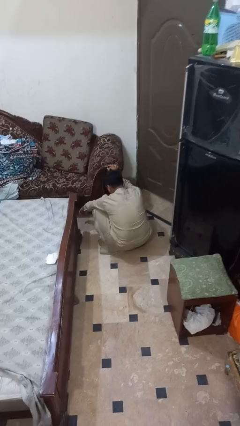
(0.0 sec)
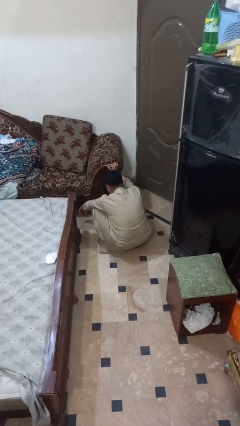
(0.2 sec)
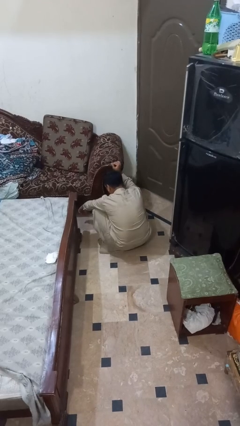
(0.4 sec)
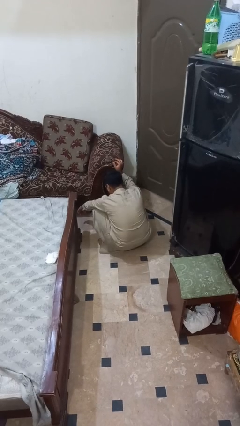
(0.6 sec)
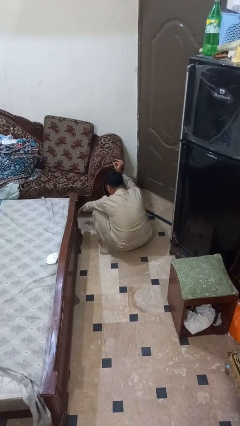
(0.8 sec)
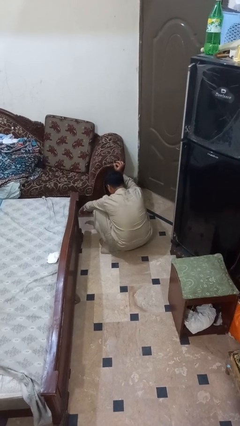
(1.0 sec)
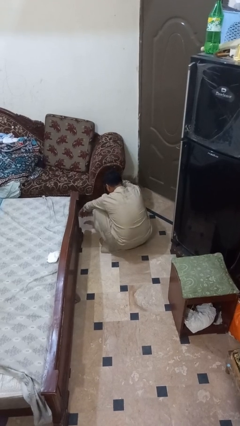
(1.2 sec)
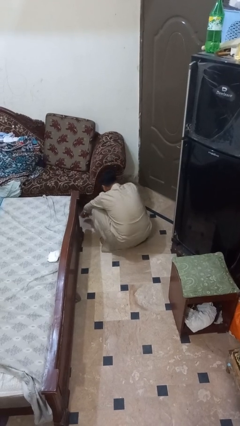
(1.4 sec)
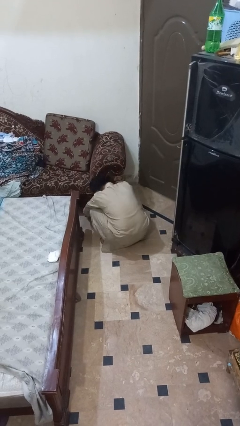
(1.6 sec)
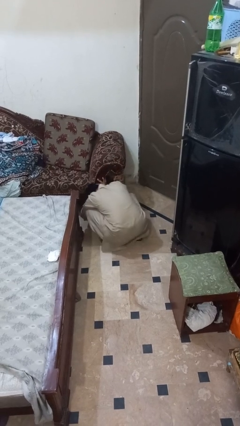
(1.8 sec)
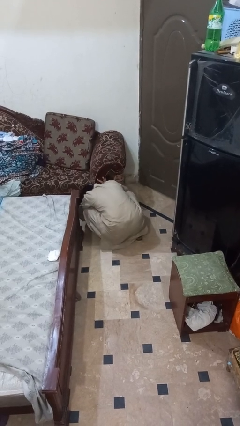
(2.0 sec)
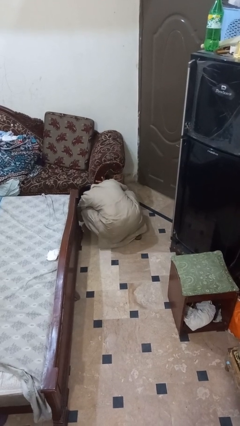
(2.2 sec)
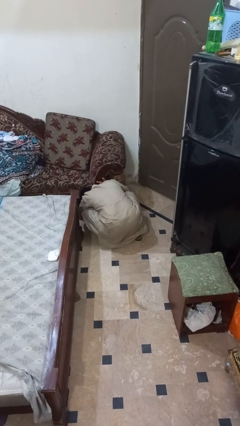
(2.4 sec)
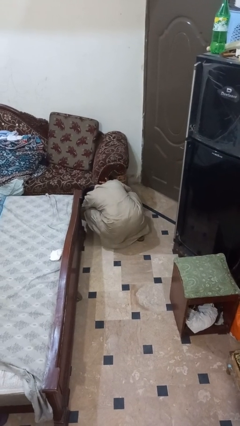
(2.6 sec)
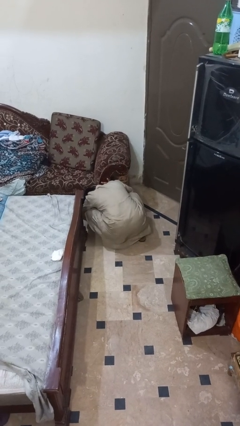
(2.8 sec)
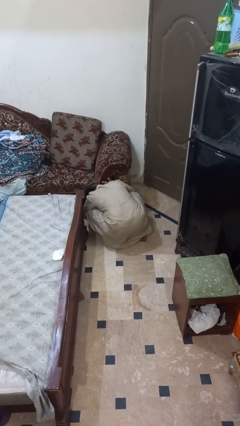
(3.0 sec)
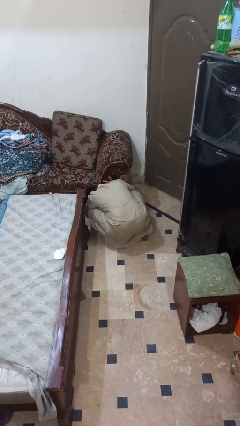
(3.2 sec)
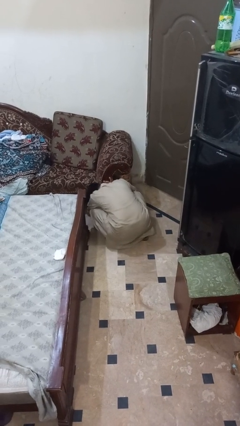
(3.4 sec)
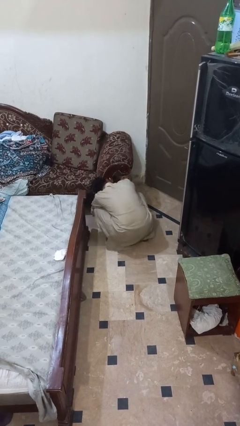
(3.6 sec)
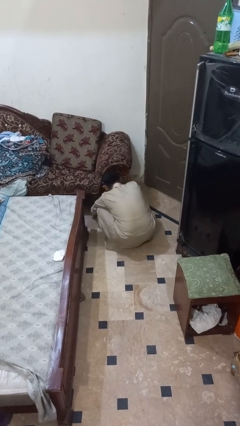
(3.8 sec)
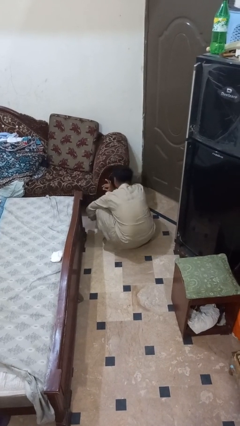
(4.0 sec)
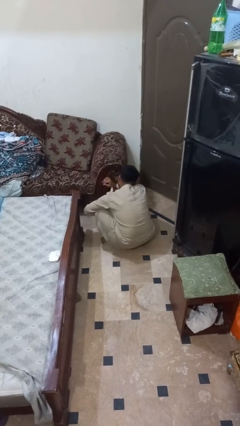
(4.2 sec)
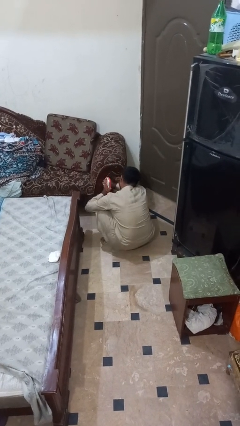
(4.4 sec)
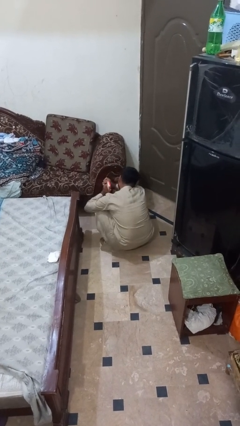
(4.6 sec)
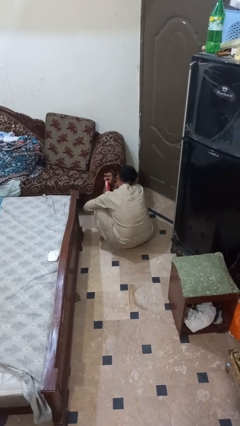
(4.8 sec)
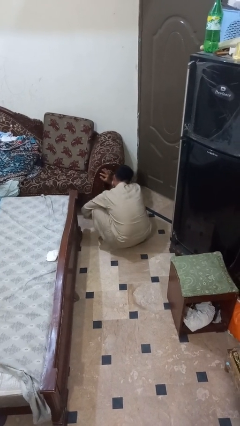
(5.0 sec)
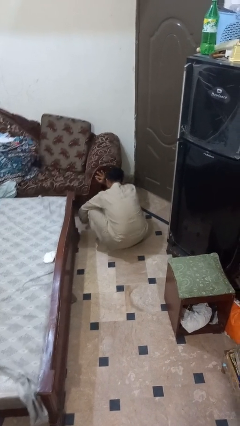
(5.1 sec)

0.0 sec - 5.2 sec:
person searches under couch

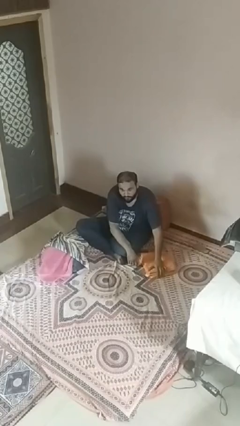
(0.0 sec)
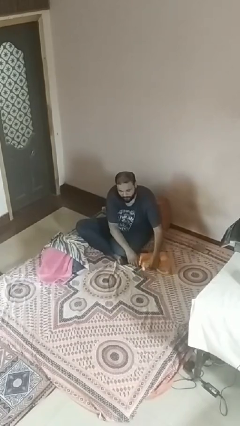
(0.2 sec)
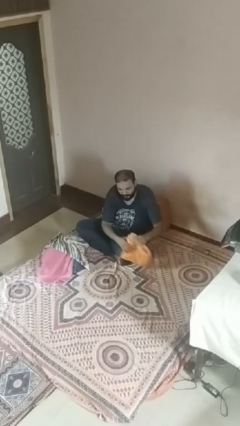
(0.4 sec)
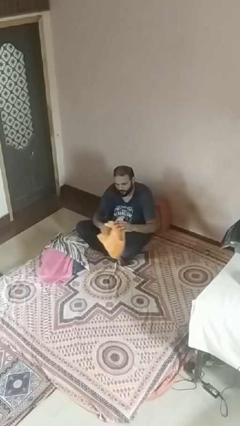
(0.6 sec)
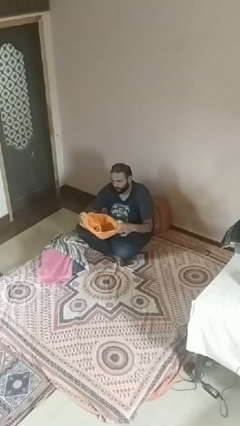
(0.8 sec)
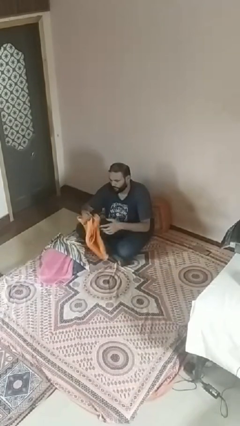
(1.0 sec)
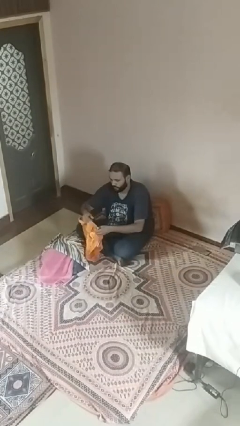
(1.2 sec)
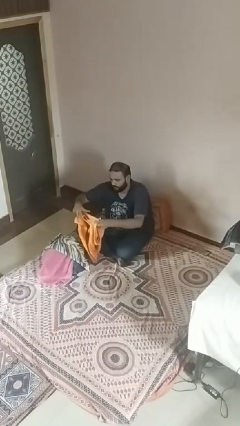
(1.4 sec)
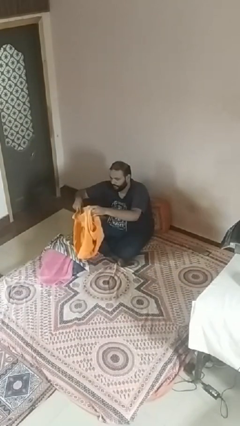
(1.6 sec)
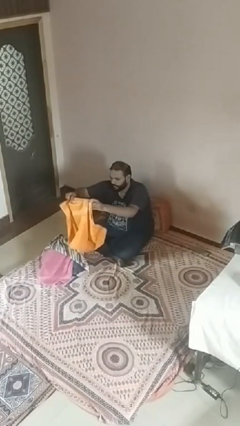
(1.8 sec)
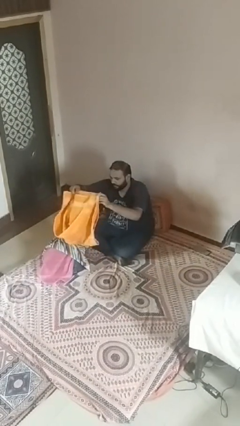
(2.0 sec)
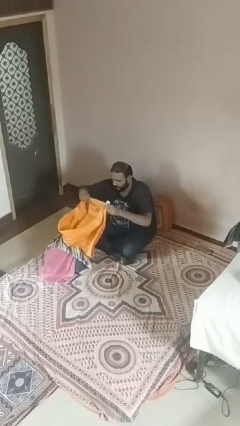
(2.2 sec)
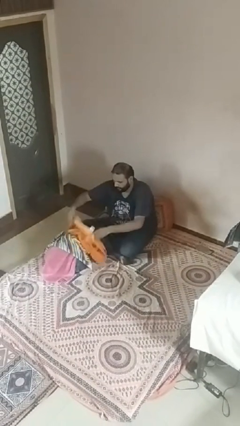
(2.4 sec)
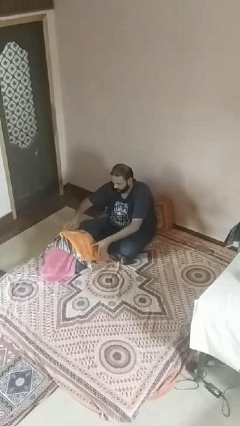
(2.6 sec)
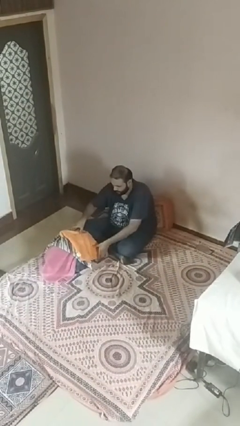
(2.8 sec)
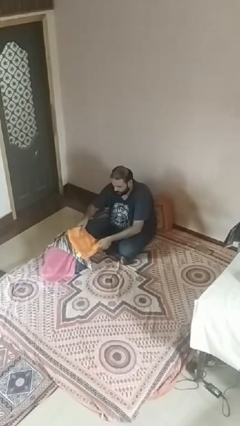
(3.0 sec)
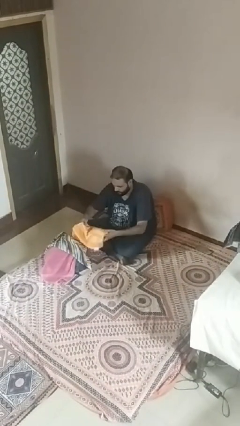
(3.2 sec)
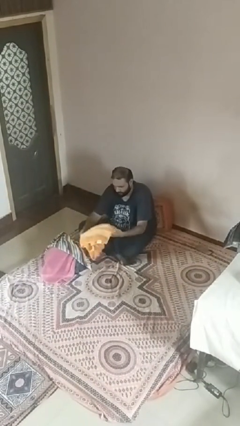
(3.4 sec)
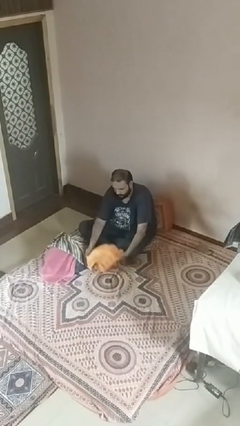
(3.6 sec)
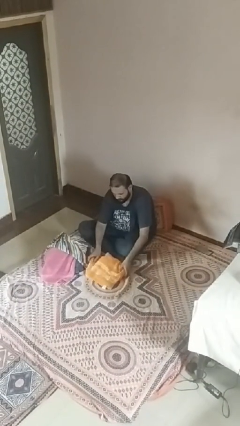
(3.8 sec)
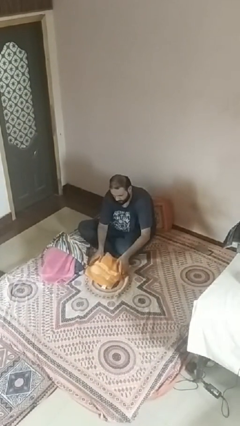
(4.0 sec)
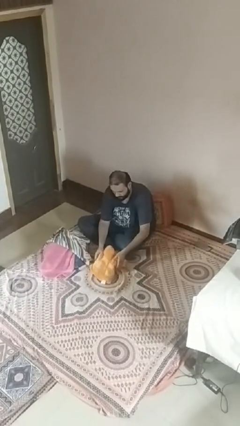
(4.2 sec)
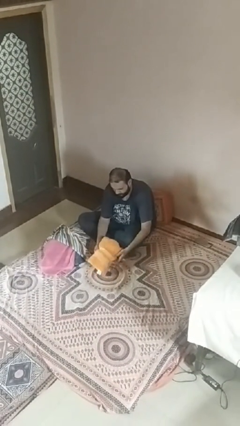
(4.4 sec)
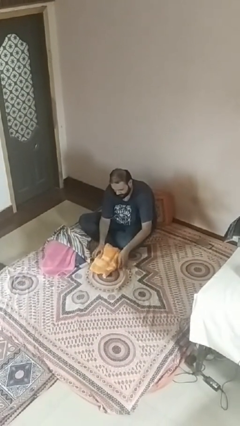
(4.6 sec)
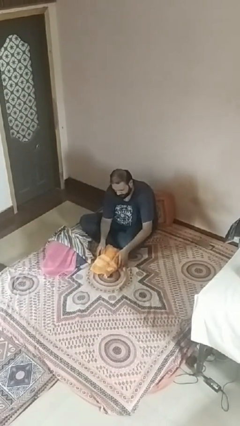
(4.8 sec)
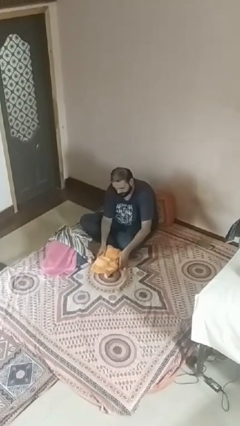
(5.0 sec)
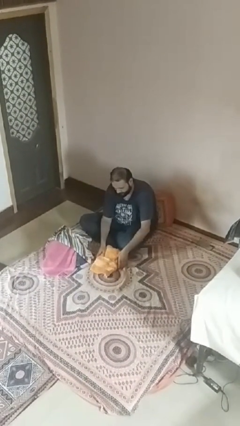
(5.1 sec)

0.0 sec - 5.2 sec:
person folds towel

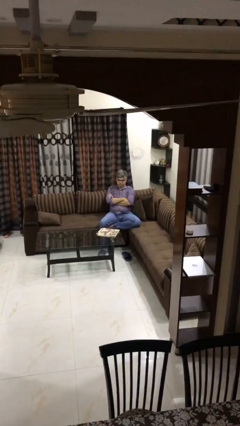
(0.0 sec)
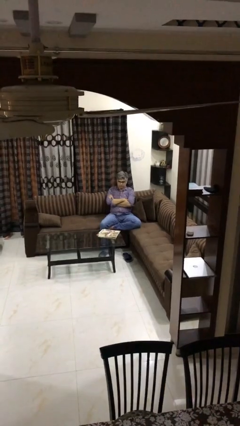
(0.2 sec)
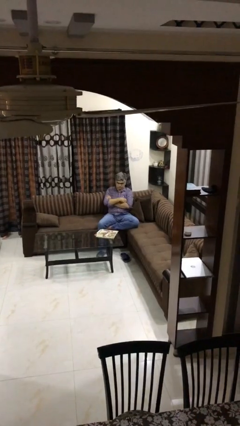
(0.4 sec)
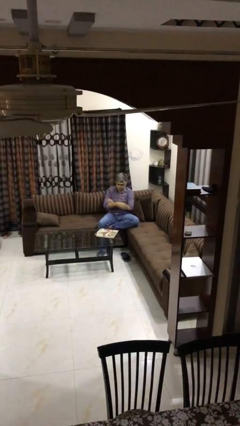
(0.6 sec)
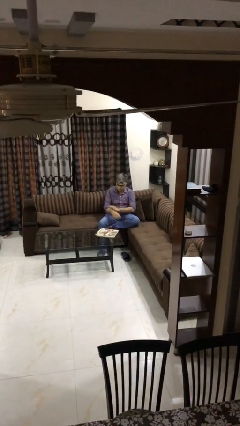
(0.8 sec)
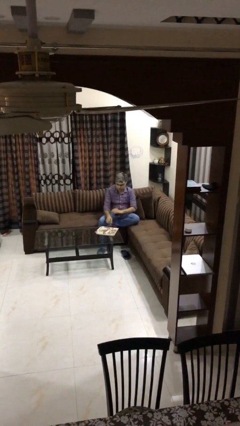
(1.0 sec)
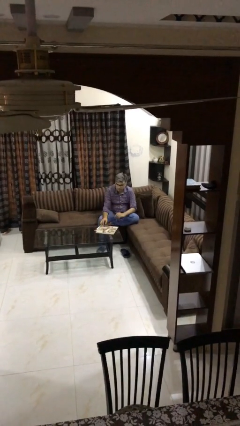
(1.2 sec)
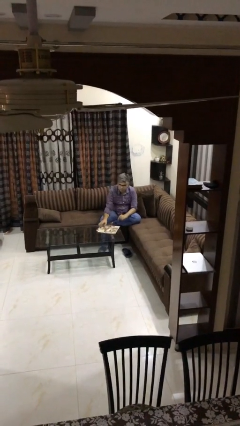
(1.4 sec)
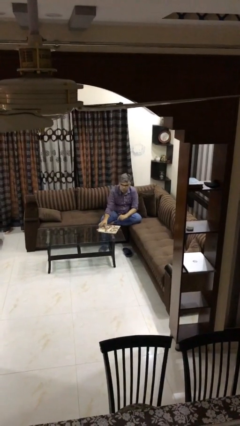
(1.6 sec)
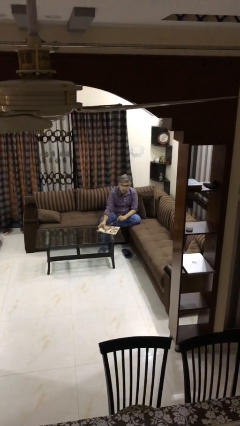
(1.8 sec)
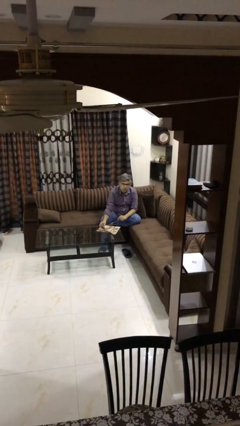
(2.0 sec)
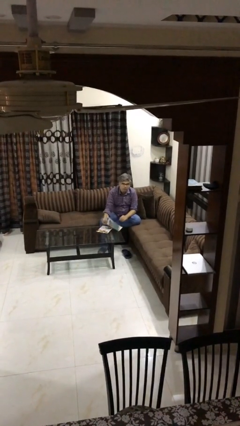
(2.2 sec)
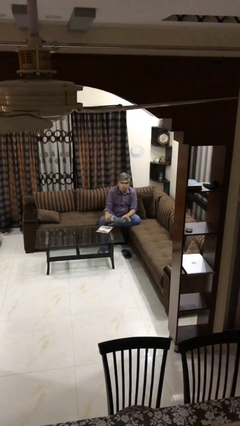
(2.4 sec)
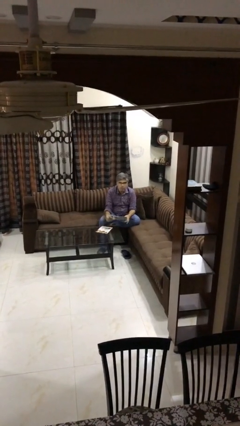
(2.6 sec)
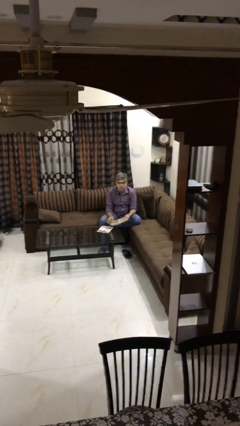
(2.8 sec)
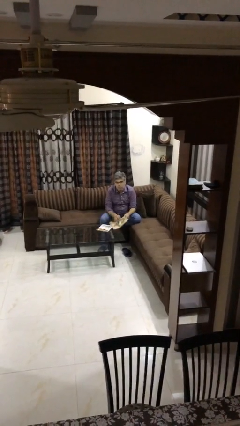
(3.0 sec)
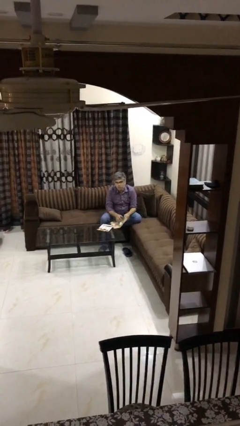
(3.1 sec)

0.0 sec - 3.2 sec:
person picks up object from table

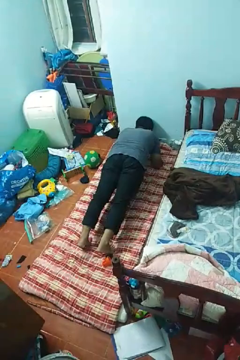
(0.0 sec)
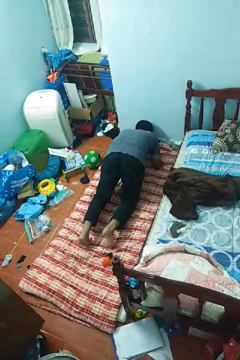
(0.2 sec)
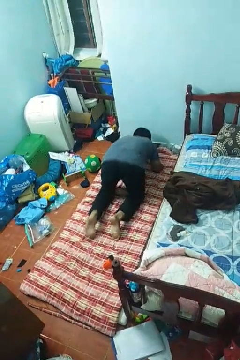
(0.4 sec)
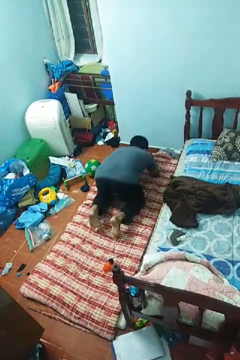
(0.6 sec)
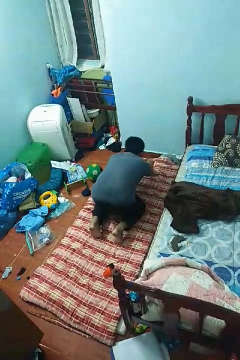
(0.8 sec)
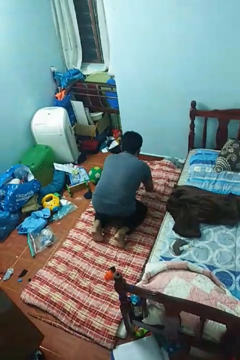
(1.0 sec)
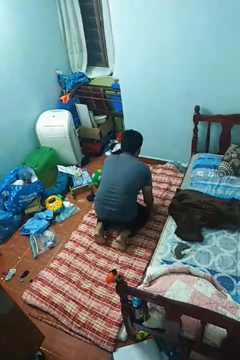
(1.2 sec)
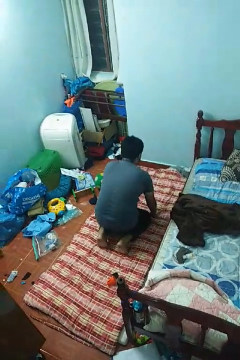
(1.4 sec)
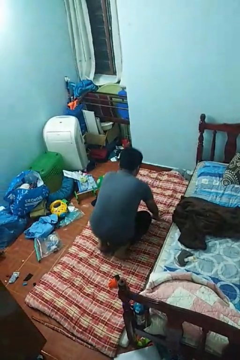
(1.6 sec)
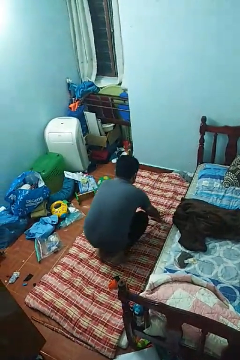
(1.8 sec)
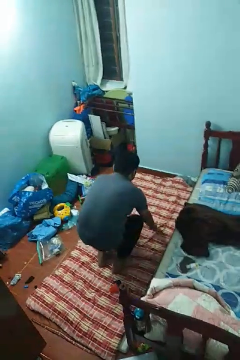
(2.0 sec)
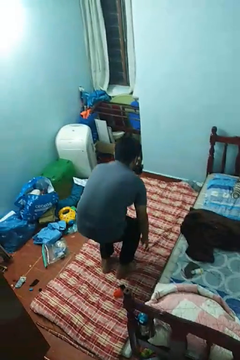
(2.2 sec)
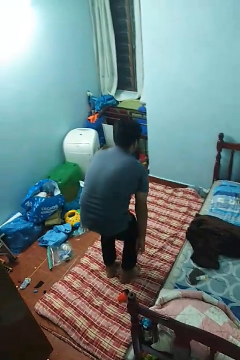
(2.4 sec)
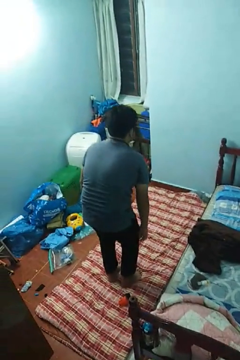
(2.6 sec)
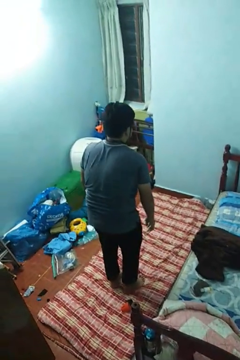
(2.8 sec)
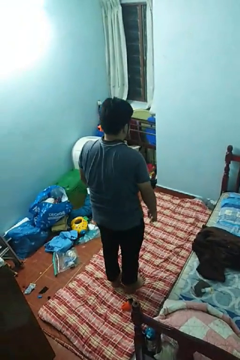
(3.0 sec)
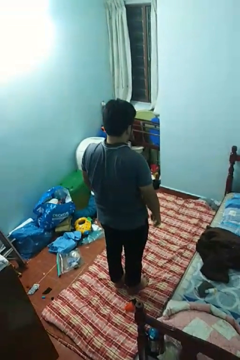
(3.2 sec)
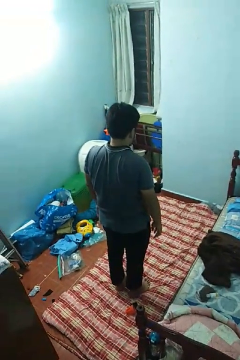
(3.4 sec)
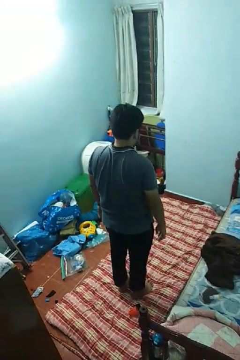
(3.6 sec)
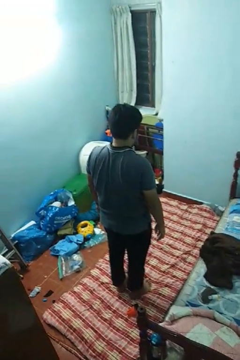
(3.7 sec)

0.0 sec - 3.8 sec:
person stands up from floor

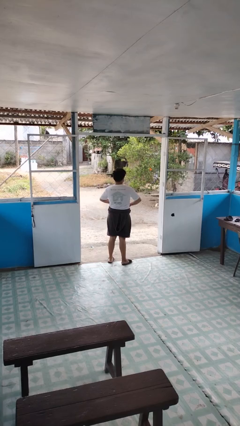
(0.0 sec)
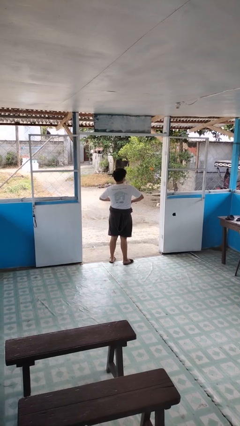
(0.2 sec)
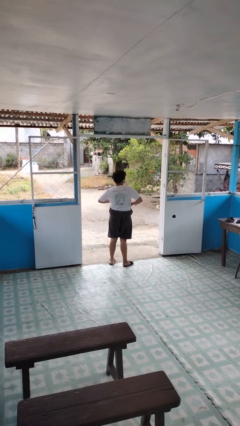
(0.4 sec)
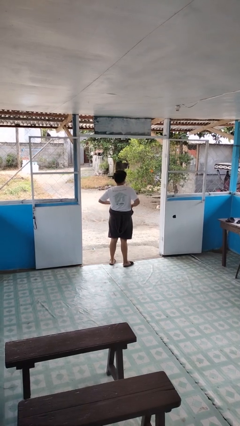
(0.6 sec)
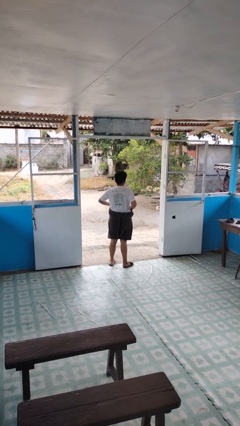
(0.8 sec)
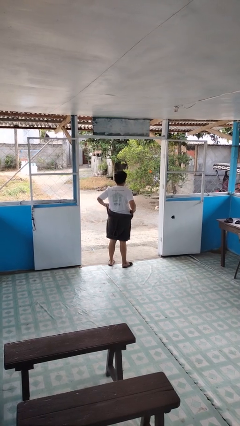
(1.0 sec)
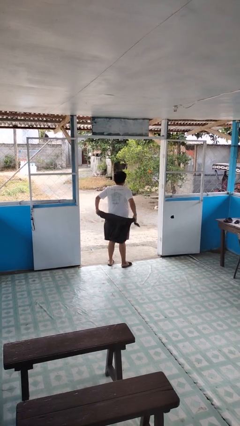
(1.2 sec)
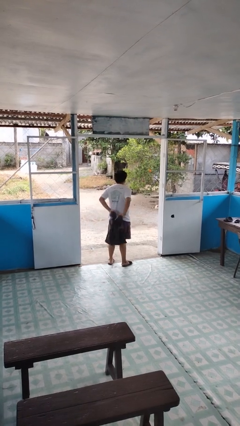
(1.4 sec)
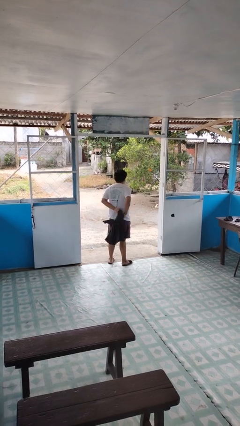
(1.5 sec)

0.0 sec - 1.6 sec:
person unties jacket around waist
